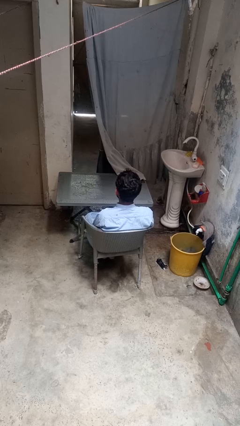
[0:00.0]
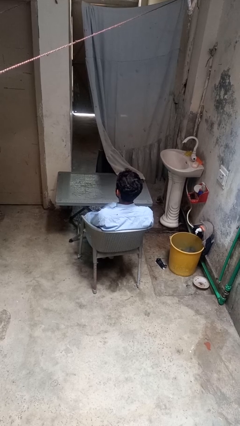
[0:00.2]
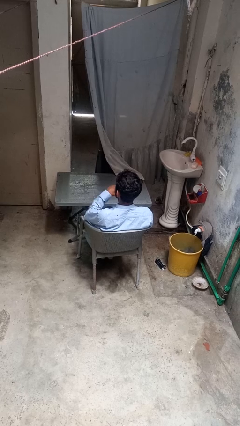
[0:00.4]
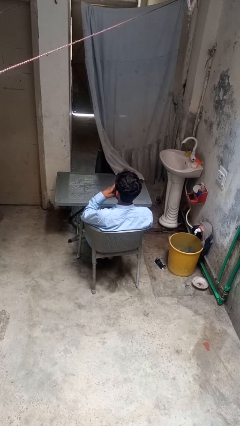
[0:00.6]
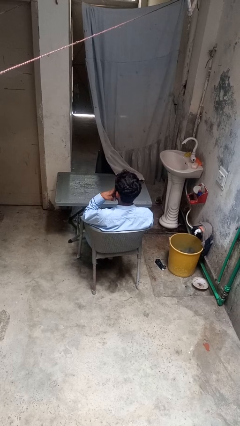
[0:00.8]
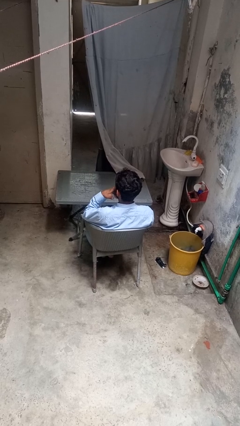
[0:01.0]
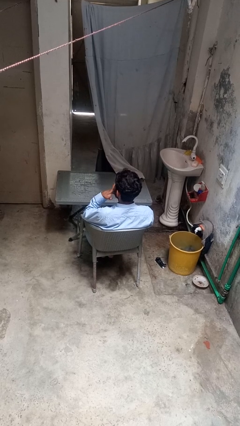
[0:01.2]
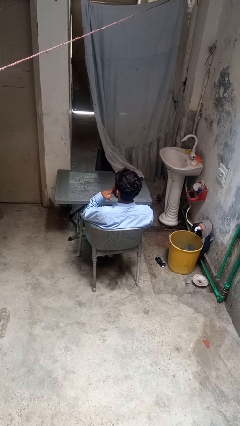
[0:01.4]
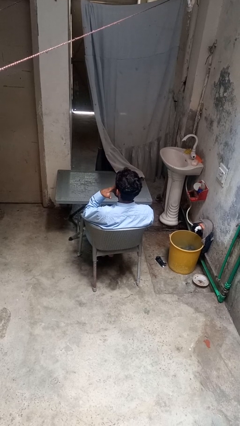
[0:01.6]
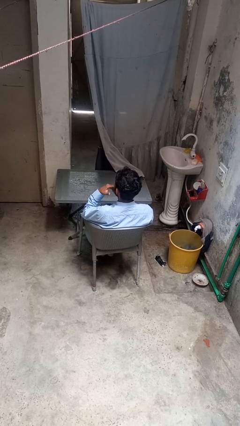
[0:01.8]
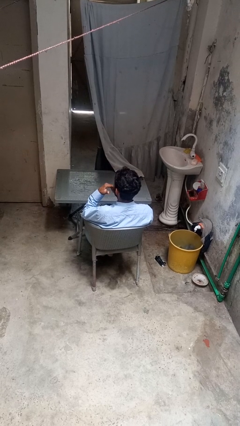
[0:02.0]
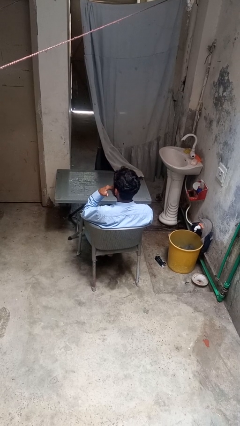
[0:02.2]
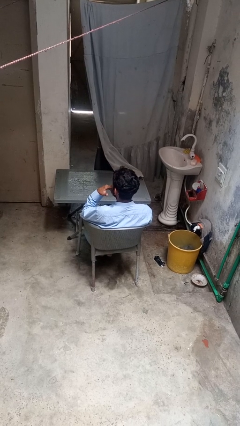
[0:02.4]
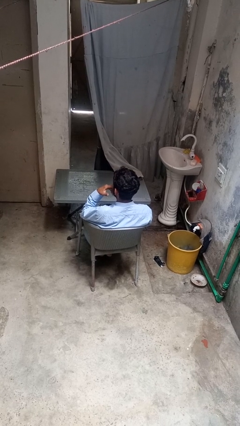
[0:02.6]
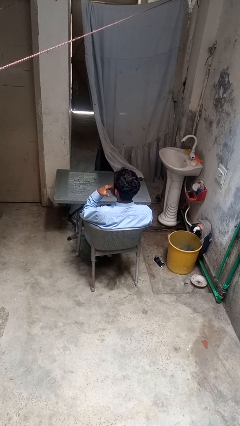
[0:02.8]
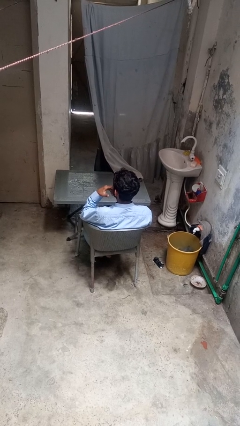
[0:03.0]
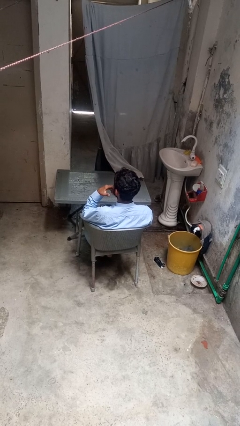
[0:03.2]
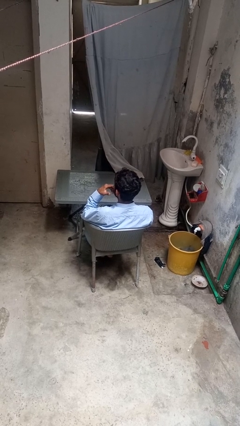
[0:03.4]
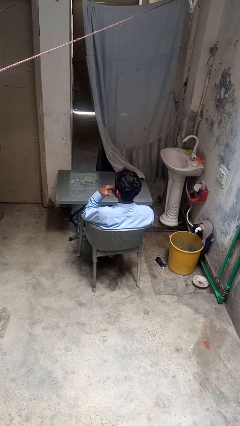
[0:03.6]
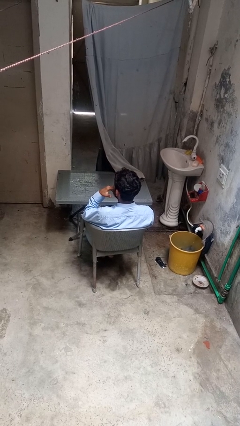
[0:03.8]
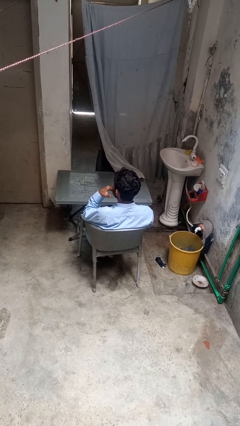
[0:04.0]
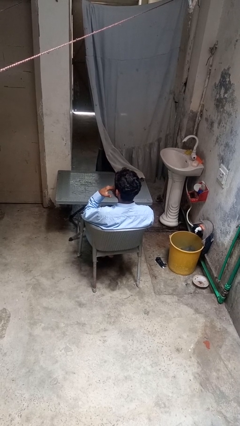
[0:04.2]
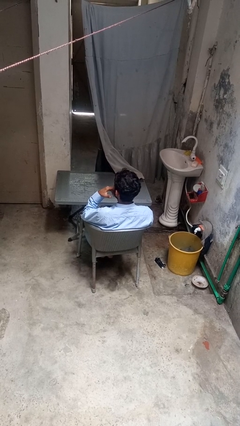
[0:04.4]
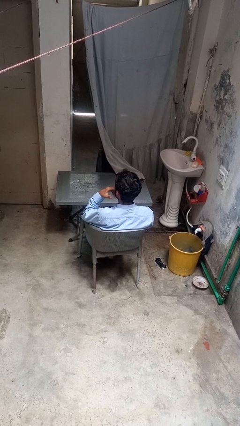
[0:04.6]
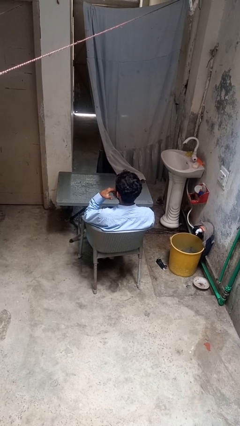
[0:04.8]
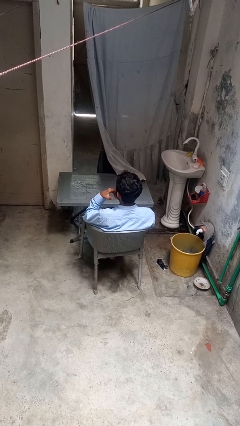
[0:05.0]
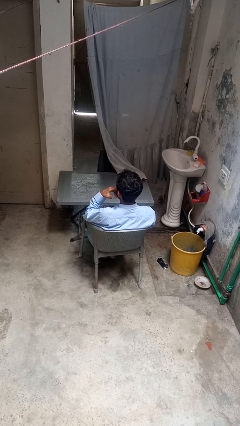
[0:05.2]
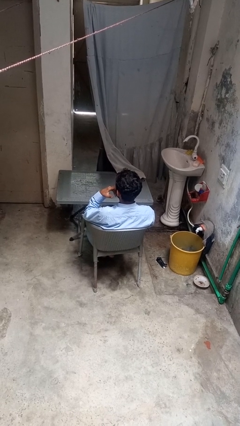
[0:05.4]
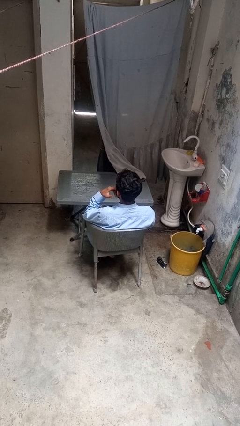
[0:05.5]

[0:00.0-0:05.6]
person licks fingers

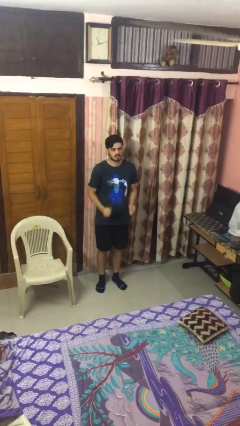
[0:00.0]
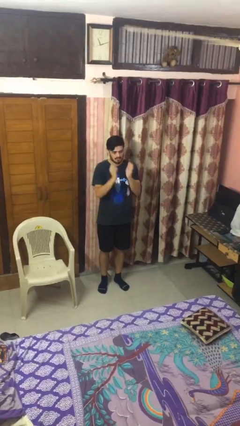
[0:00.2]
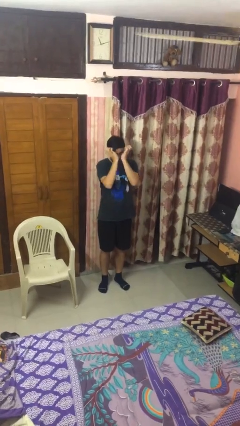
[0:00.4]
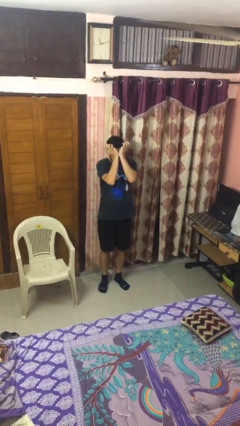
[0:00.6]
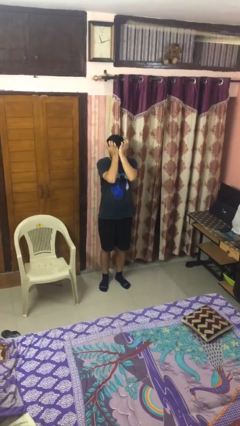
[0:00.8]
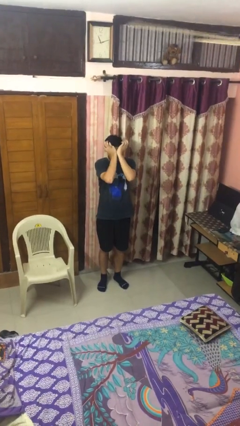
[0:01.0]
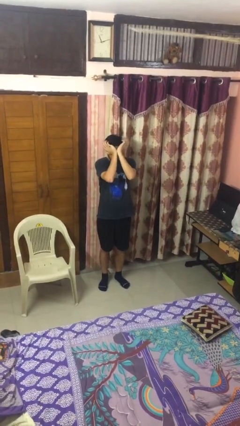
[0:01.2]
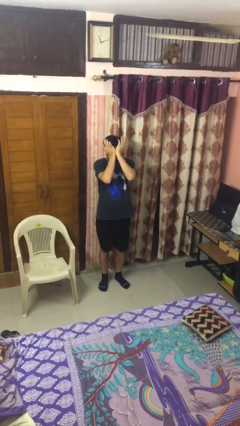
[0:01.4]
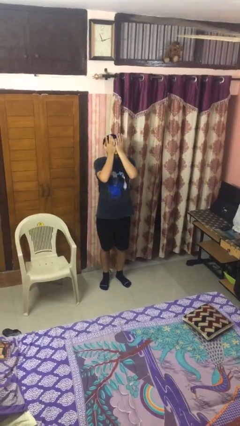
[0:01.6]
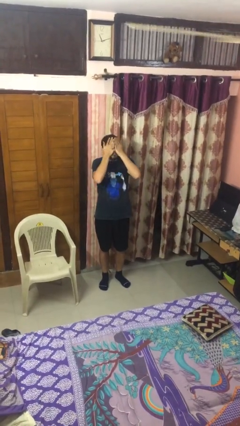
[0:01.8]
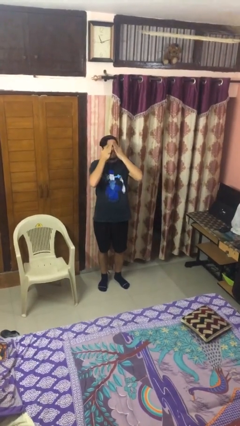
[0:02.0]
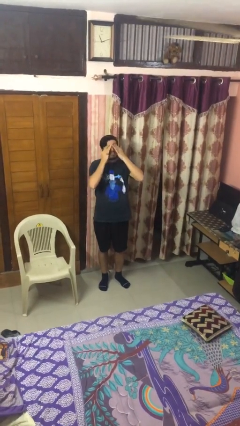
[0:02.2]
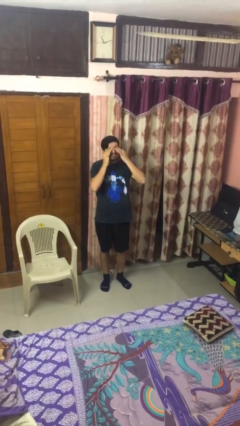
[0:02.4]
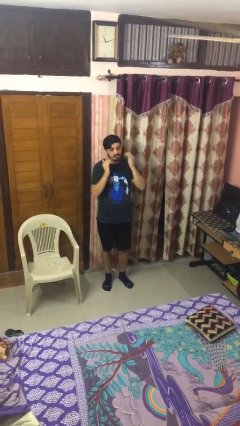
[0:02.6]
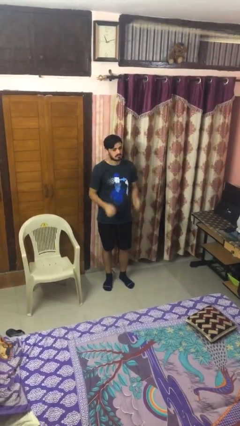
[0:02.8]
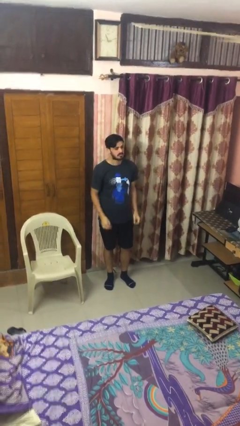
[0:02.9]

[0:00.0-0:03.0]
person rubs eyes

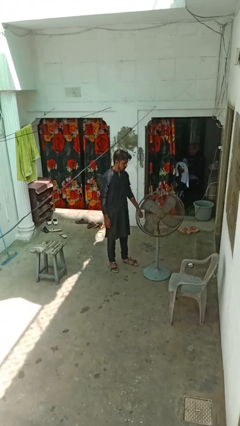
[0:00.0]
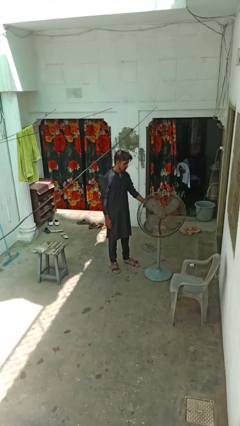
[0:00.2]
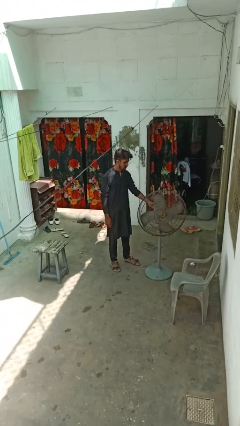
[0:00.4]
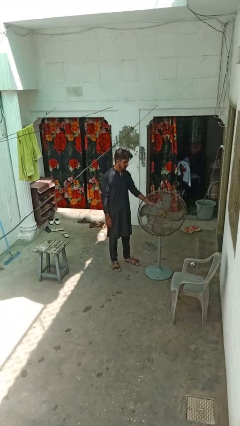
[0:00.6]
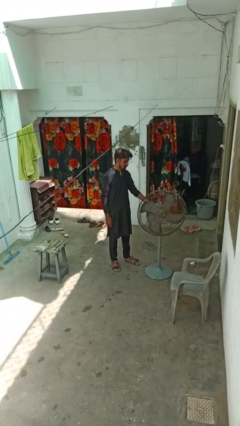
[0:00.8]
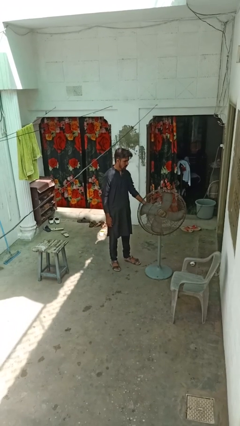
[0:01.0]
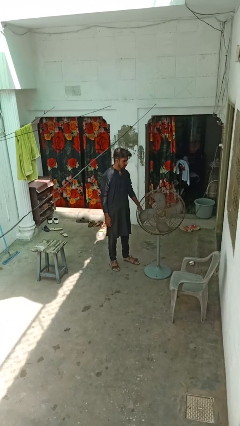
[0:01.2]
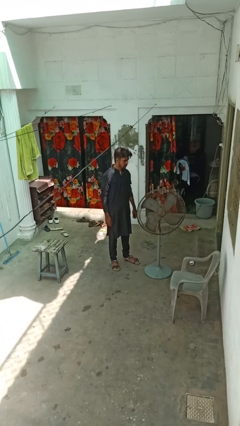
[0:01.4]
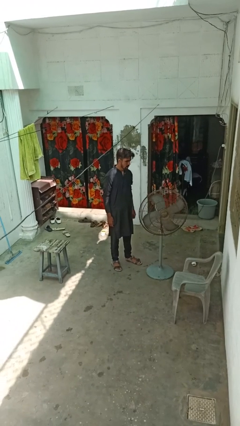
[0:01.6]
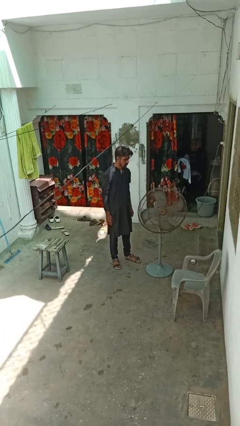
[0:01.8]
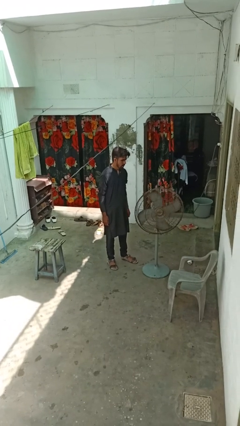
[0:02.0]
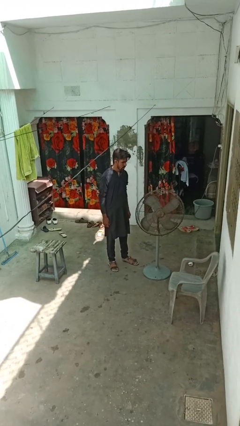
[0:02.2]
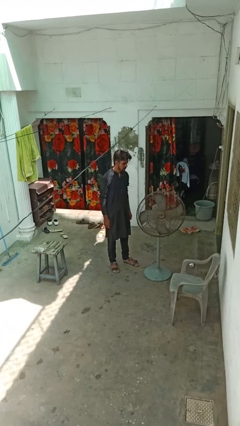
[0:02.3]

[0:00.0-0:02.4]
person turns off fan

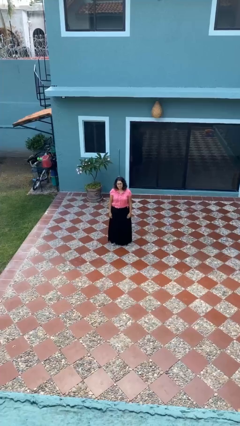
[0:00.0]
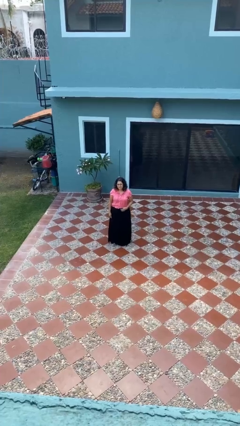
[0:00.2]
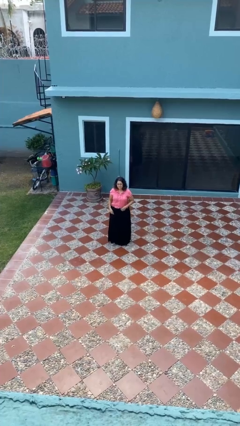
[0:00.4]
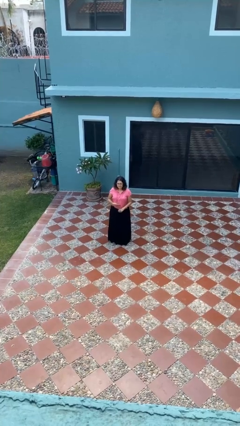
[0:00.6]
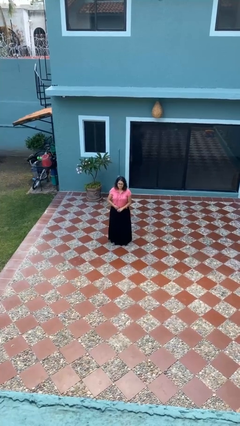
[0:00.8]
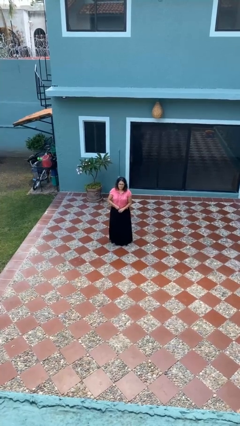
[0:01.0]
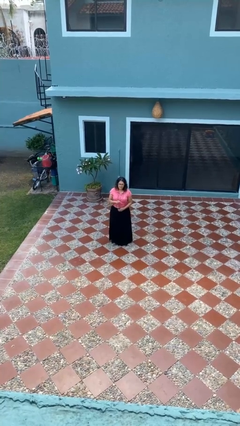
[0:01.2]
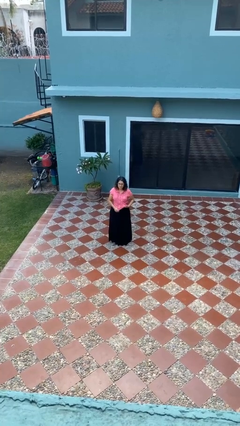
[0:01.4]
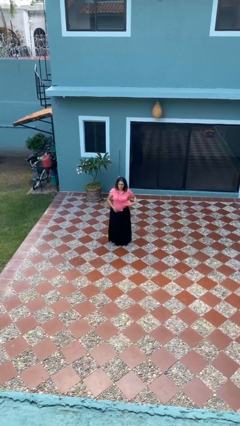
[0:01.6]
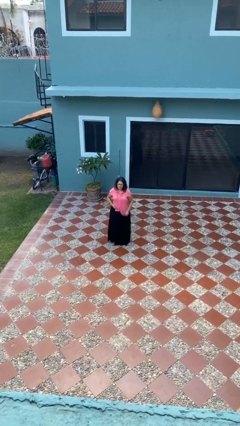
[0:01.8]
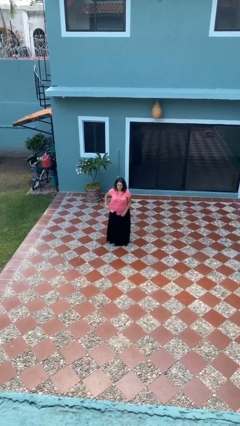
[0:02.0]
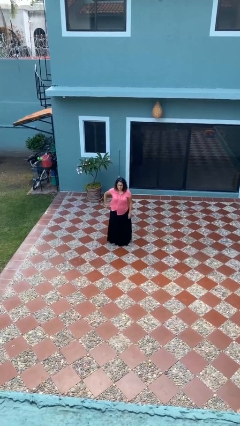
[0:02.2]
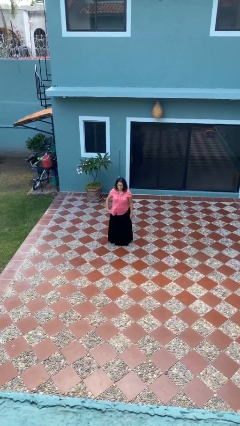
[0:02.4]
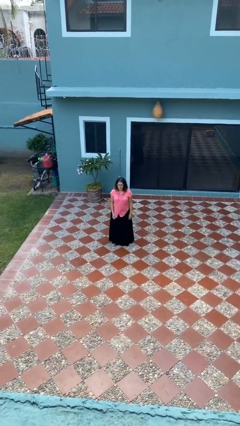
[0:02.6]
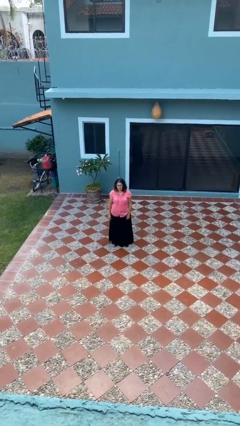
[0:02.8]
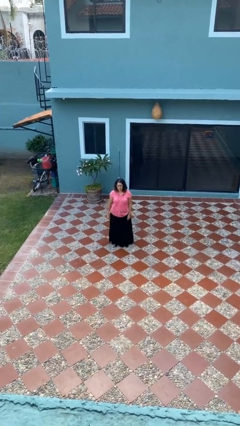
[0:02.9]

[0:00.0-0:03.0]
person untucks shirt

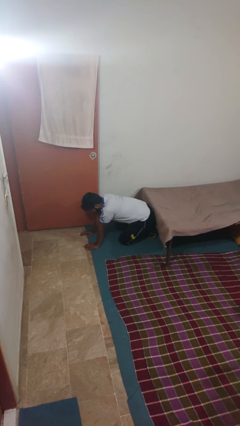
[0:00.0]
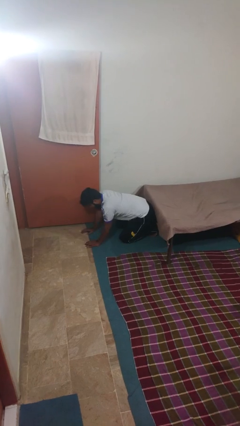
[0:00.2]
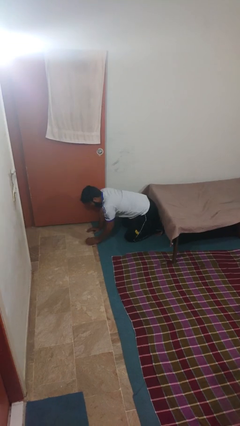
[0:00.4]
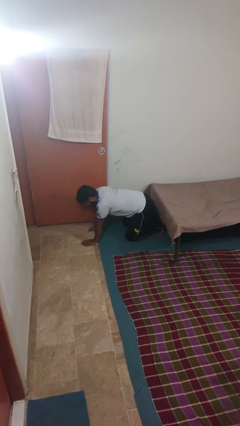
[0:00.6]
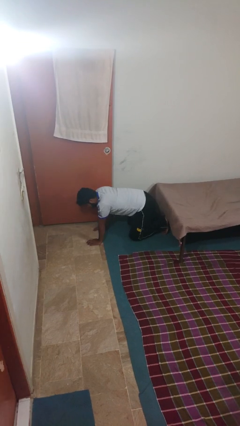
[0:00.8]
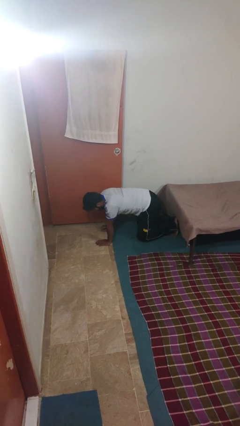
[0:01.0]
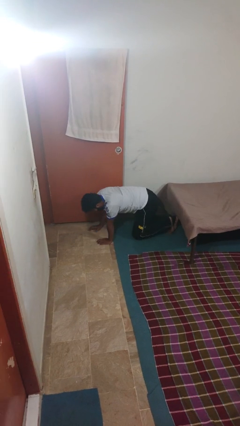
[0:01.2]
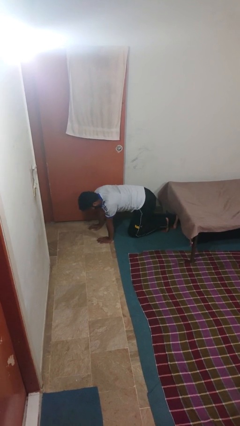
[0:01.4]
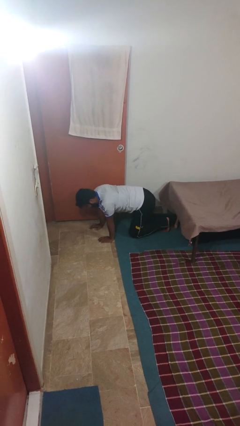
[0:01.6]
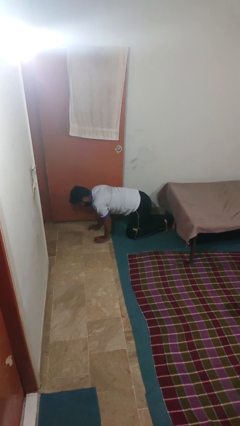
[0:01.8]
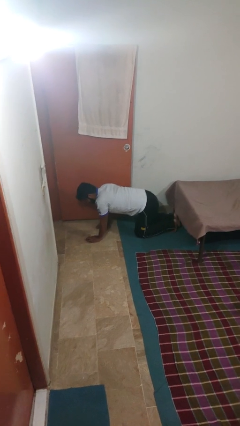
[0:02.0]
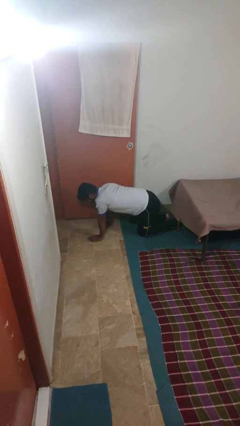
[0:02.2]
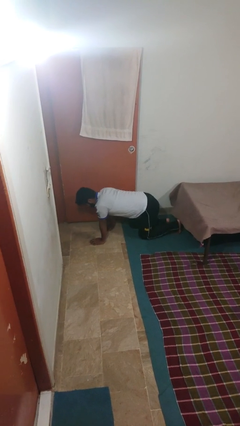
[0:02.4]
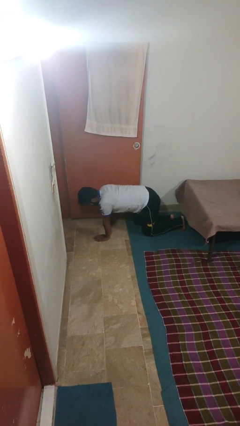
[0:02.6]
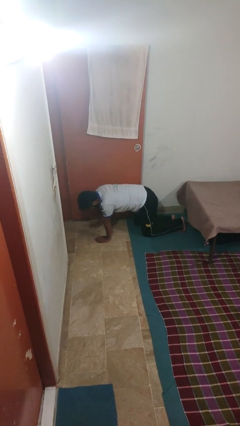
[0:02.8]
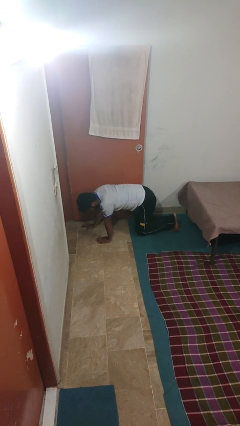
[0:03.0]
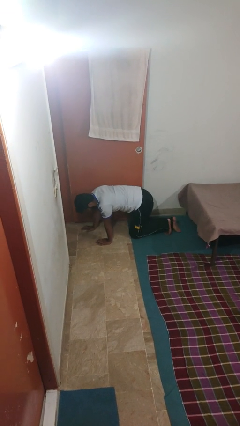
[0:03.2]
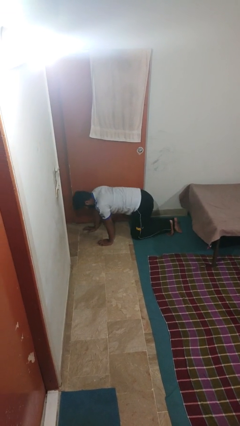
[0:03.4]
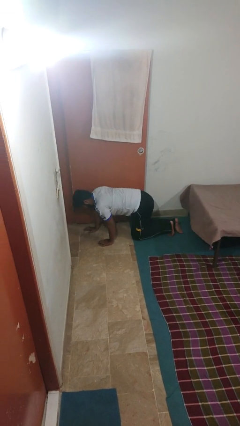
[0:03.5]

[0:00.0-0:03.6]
person crawls
